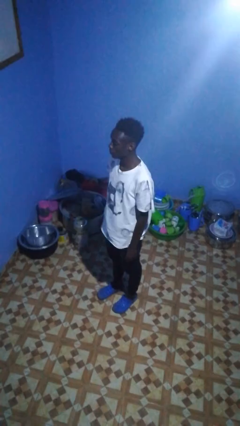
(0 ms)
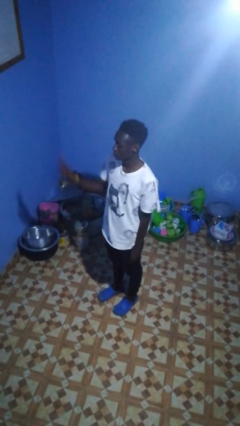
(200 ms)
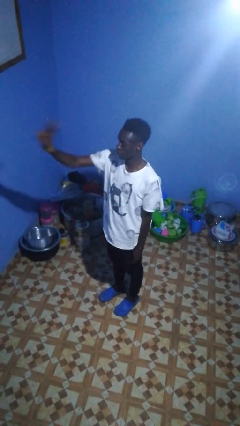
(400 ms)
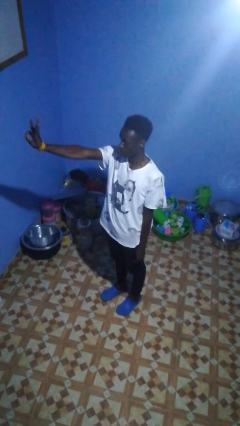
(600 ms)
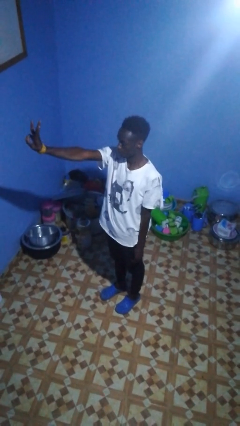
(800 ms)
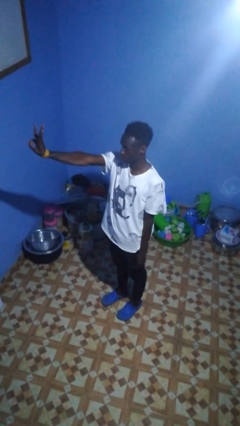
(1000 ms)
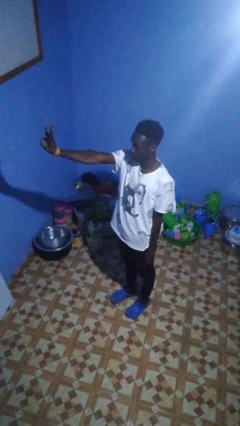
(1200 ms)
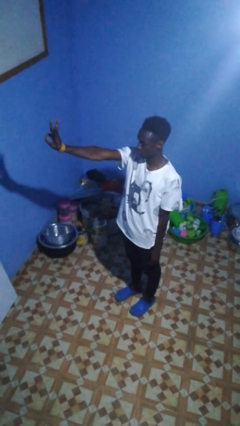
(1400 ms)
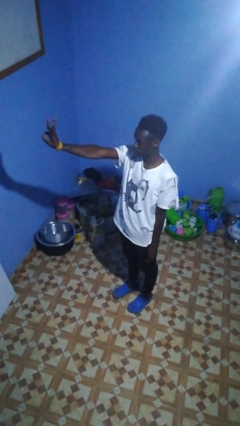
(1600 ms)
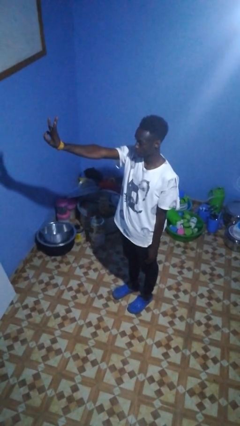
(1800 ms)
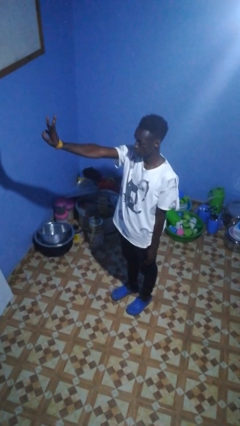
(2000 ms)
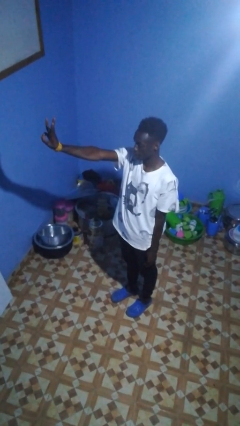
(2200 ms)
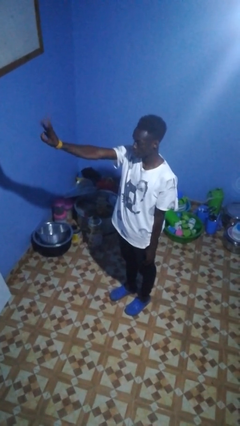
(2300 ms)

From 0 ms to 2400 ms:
person gestures number three

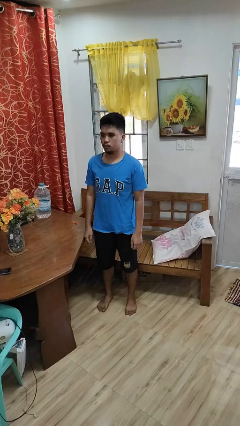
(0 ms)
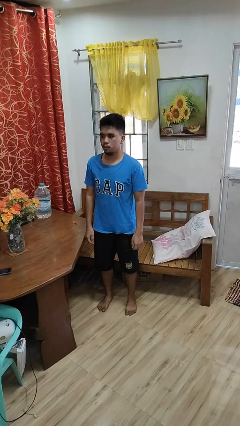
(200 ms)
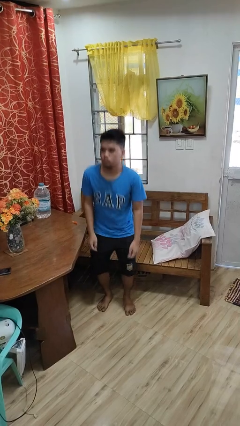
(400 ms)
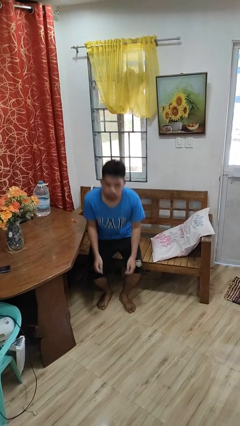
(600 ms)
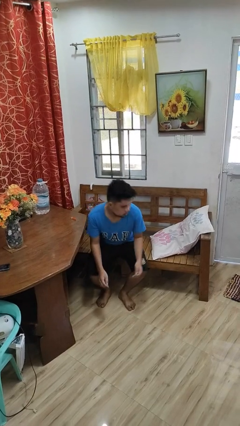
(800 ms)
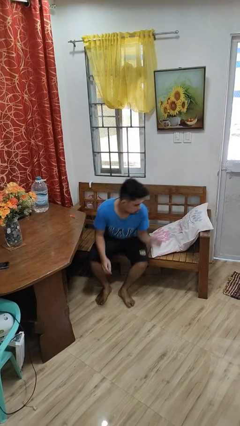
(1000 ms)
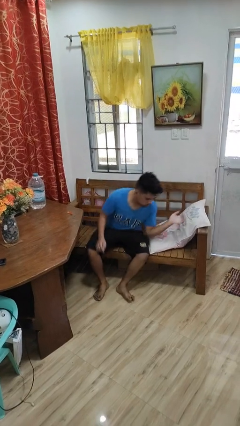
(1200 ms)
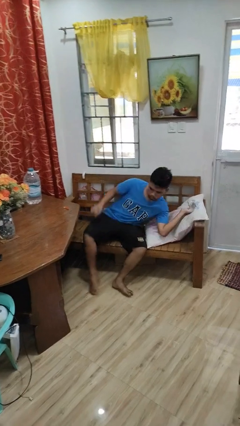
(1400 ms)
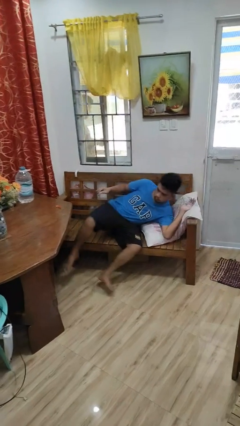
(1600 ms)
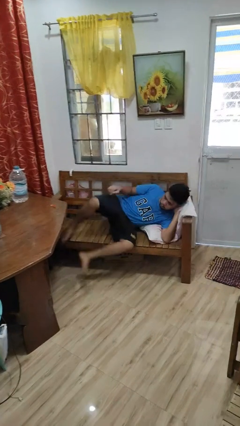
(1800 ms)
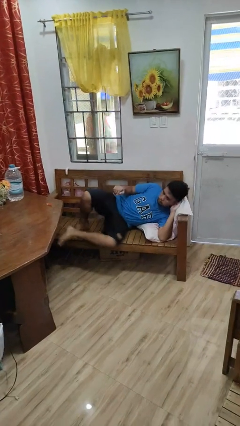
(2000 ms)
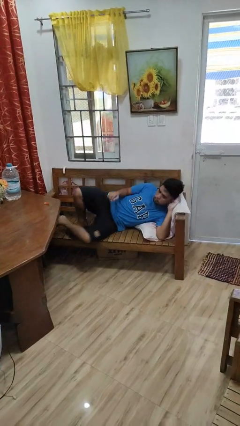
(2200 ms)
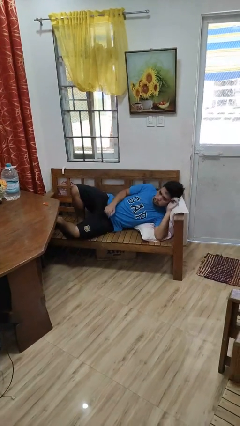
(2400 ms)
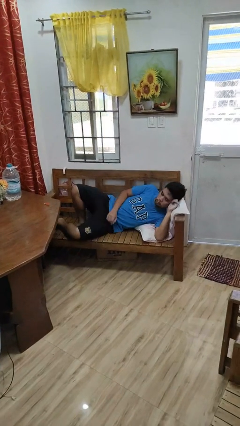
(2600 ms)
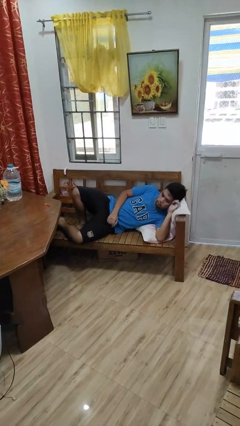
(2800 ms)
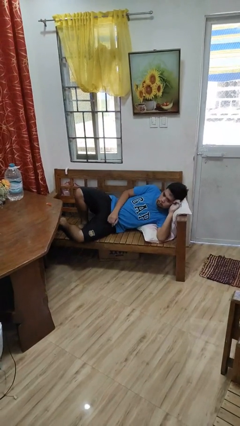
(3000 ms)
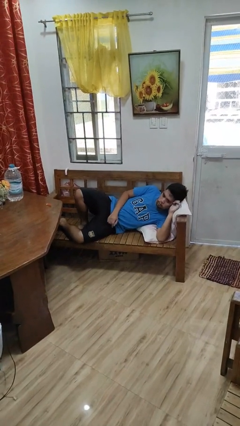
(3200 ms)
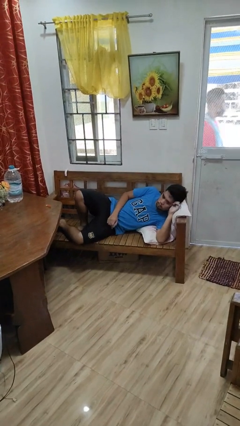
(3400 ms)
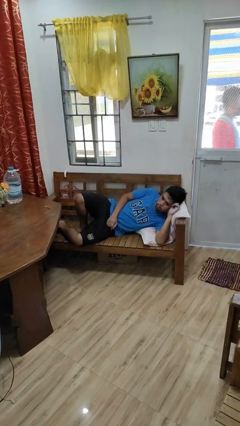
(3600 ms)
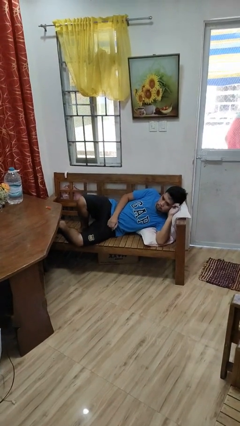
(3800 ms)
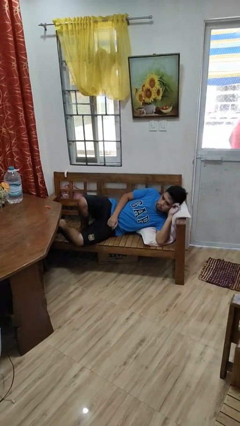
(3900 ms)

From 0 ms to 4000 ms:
person lies down on couch

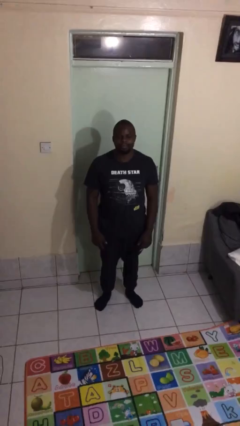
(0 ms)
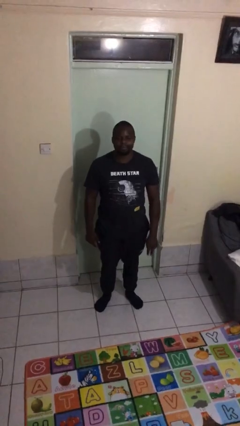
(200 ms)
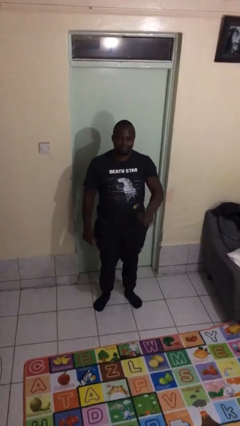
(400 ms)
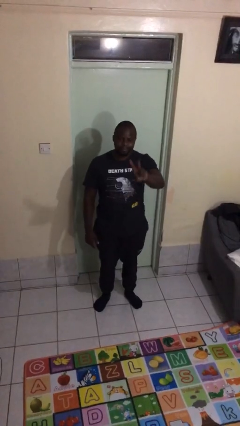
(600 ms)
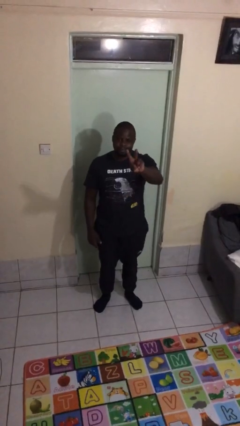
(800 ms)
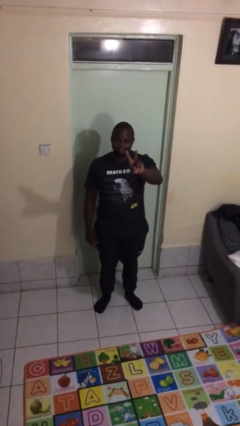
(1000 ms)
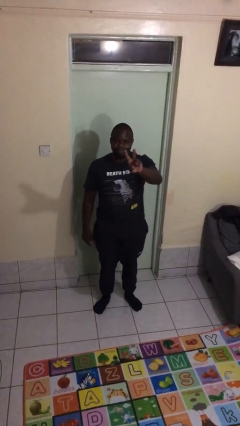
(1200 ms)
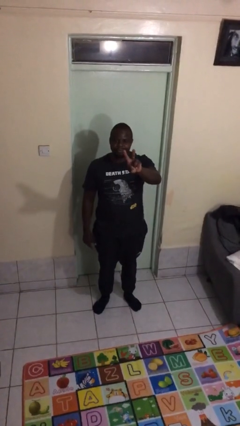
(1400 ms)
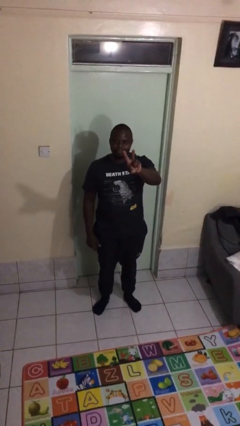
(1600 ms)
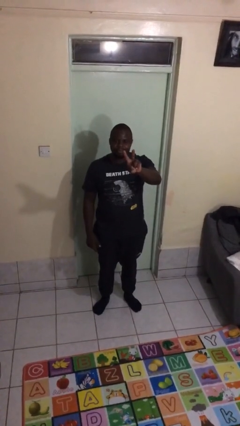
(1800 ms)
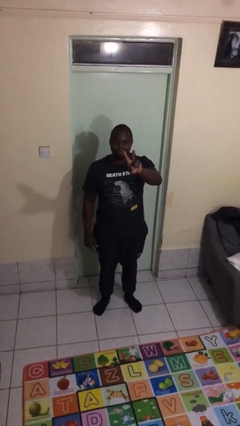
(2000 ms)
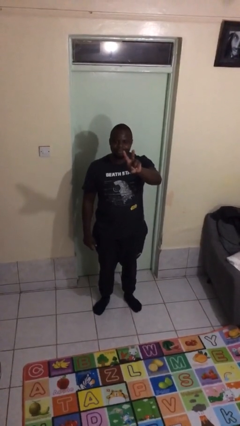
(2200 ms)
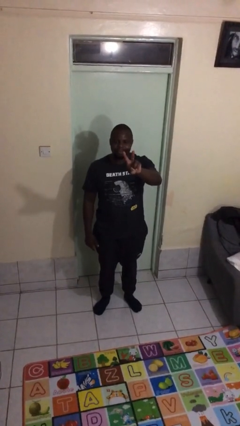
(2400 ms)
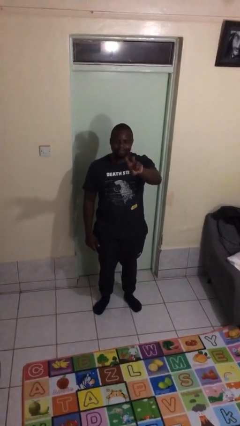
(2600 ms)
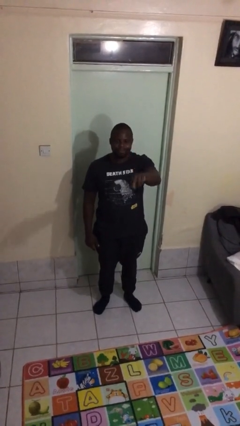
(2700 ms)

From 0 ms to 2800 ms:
person gestures peace

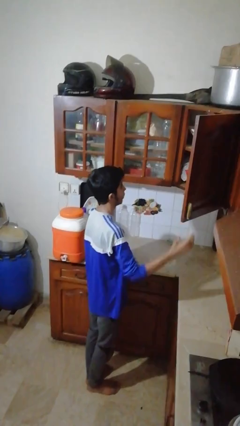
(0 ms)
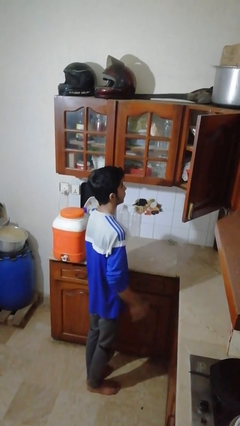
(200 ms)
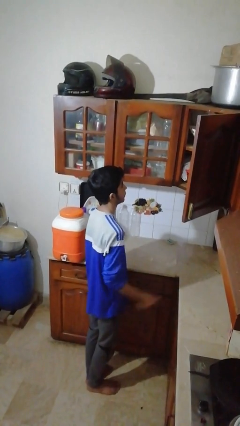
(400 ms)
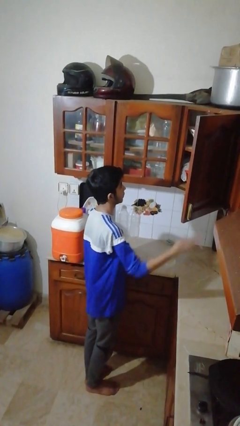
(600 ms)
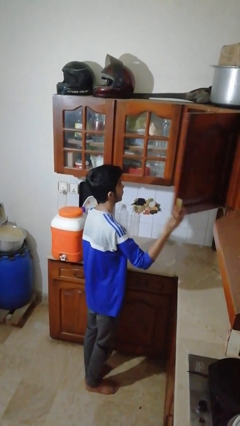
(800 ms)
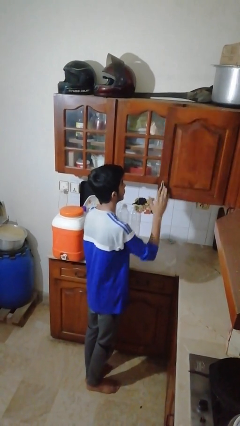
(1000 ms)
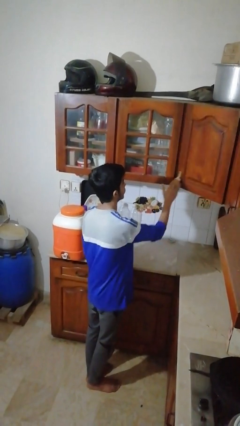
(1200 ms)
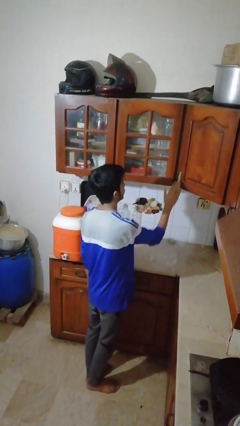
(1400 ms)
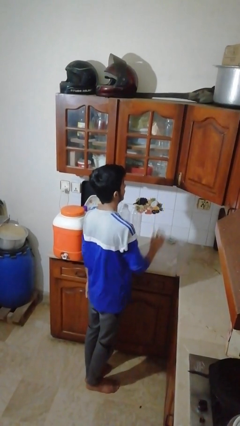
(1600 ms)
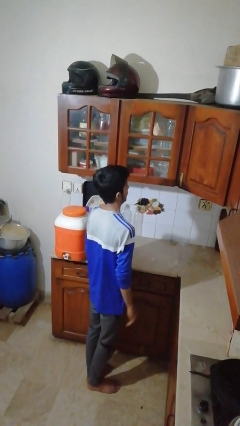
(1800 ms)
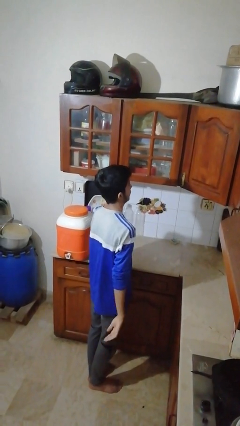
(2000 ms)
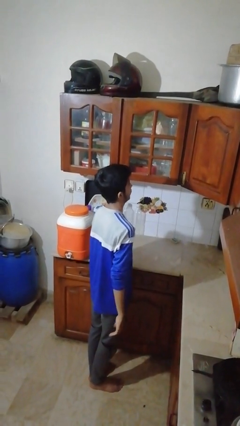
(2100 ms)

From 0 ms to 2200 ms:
person closes cabinet

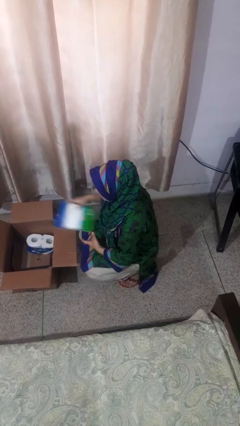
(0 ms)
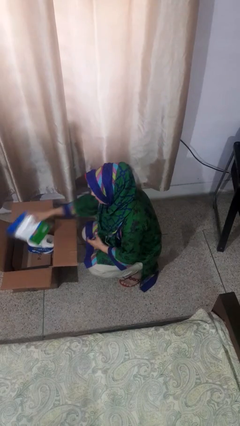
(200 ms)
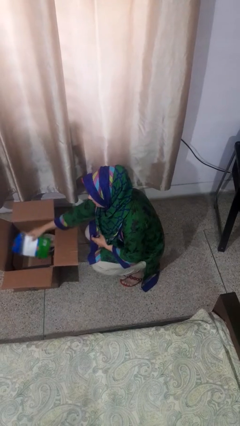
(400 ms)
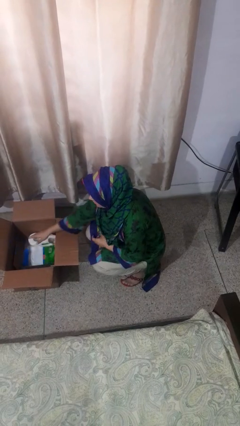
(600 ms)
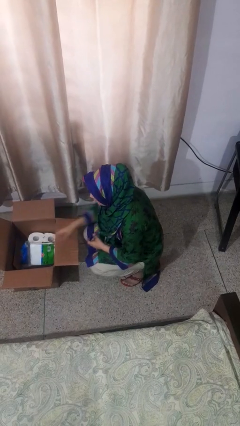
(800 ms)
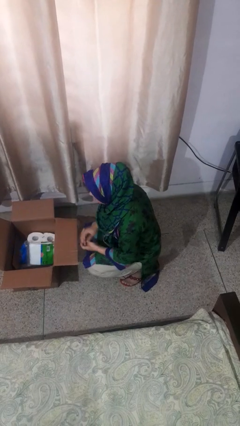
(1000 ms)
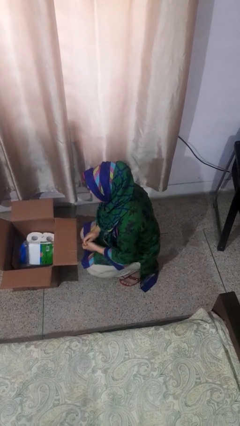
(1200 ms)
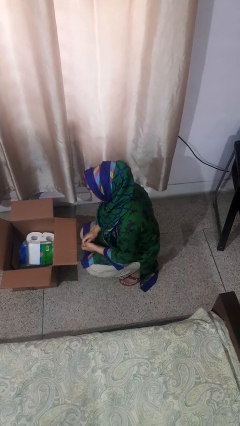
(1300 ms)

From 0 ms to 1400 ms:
person puts object into box

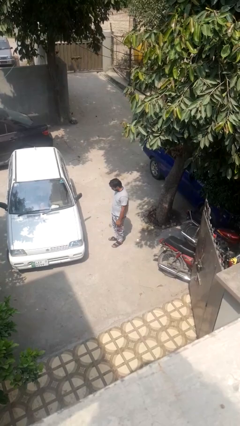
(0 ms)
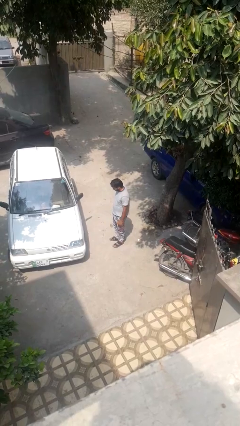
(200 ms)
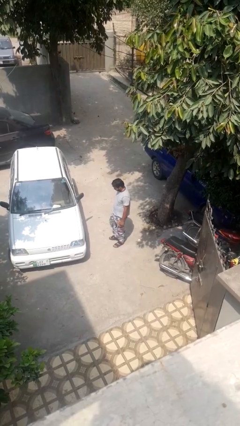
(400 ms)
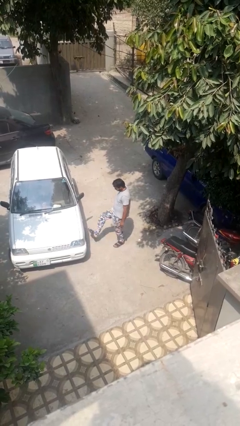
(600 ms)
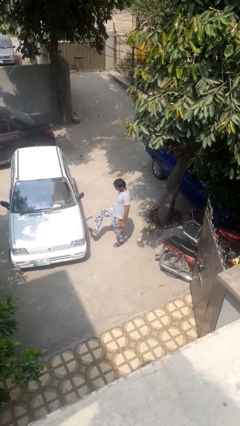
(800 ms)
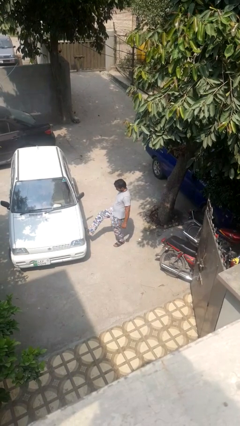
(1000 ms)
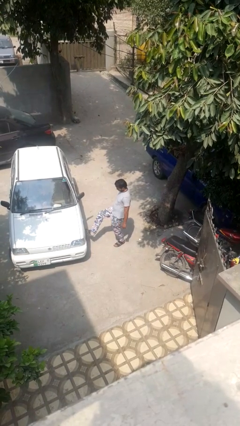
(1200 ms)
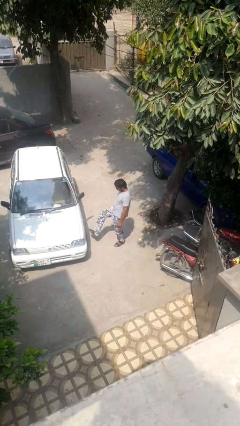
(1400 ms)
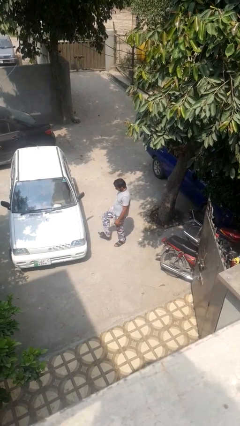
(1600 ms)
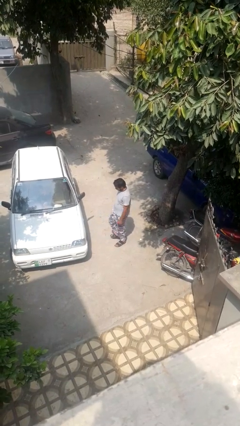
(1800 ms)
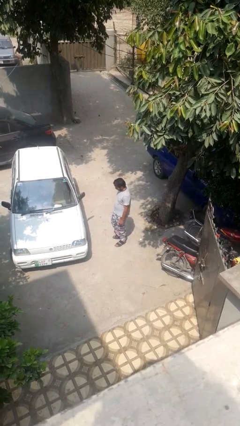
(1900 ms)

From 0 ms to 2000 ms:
person kicks car tires

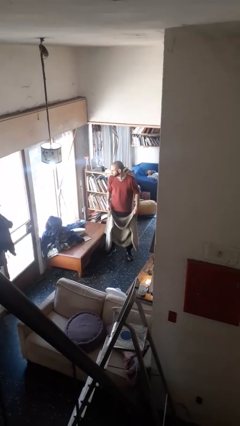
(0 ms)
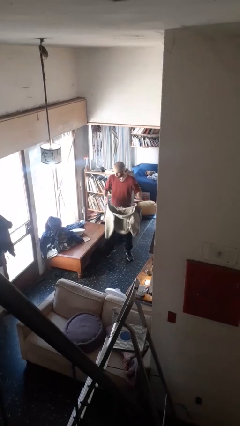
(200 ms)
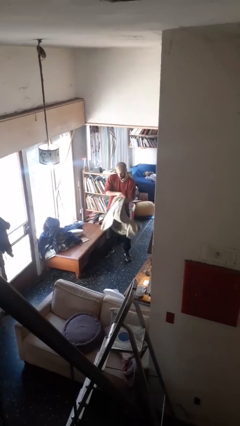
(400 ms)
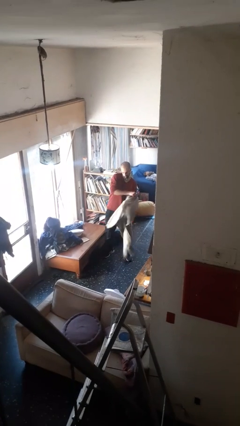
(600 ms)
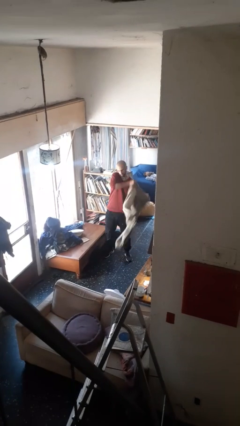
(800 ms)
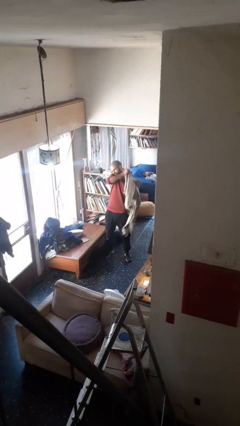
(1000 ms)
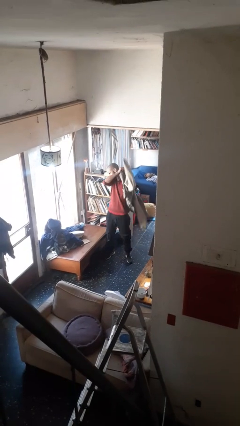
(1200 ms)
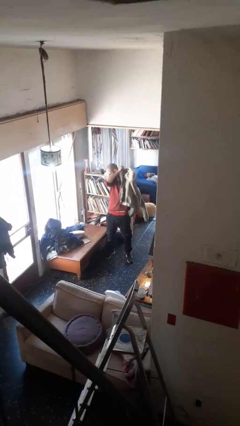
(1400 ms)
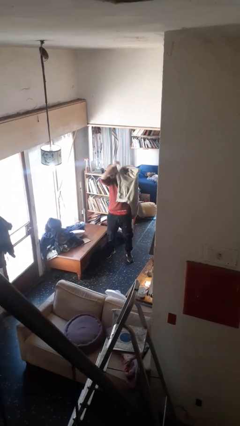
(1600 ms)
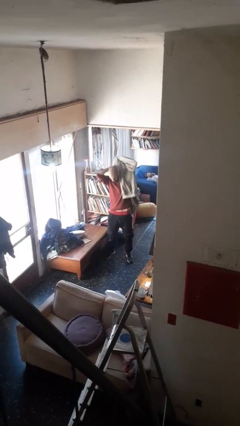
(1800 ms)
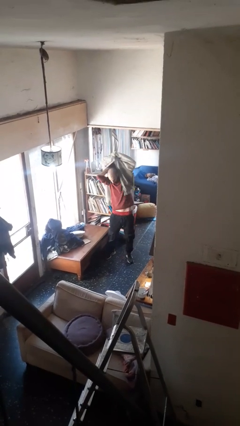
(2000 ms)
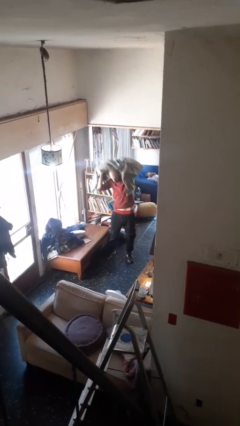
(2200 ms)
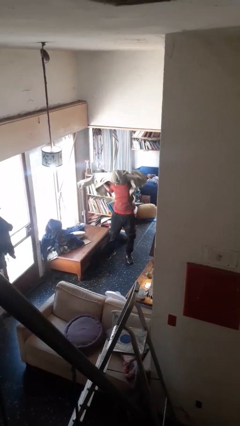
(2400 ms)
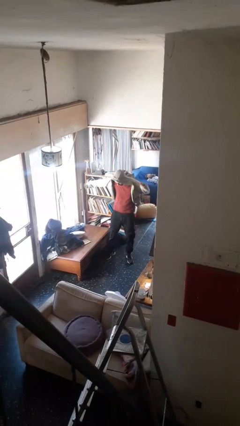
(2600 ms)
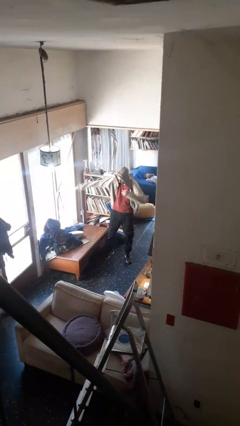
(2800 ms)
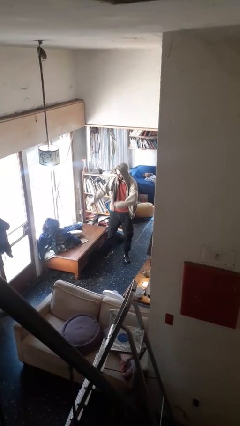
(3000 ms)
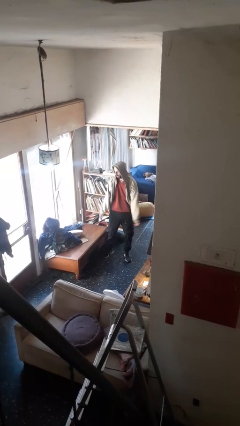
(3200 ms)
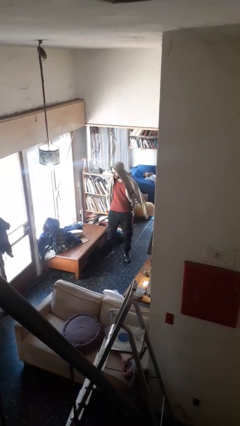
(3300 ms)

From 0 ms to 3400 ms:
person puts on hoodie
